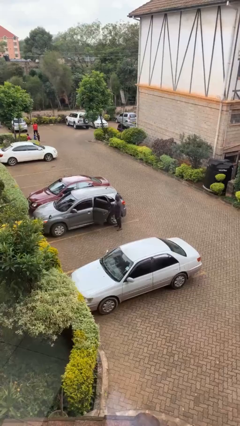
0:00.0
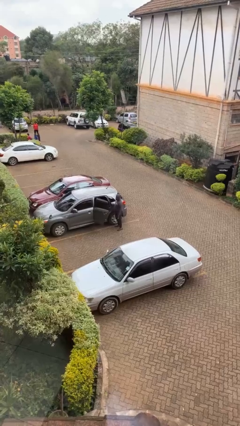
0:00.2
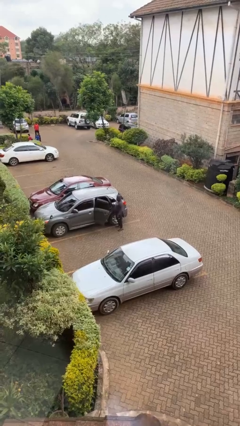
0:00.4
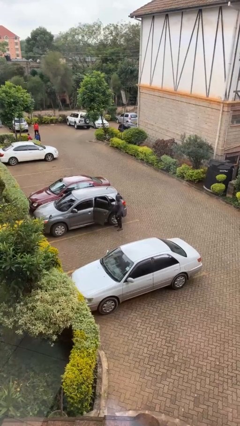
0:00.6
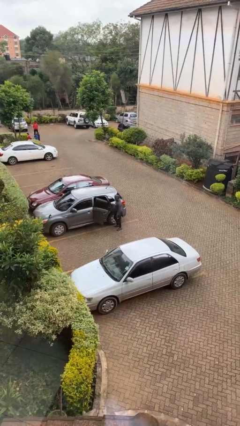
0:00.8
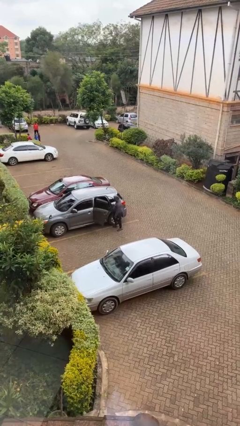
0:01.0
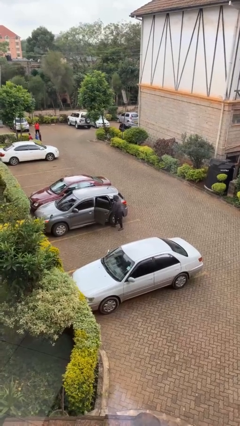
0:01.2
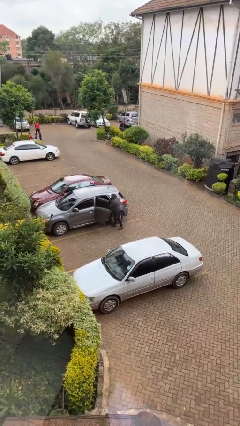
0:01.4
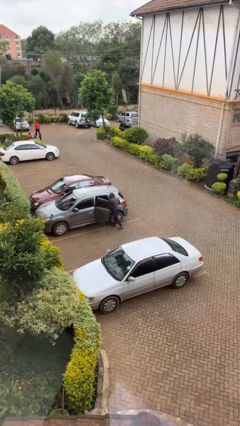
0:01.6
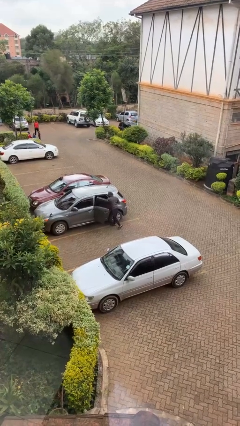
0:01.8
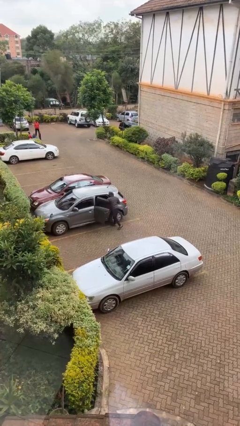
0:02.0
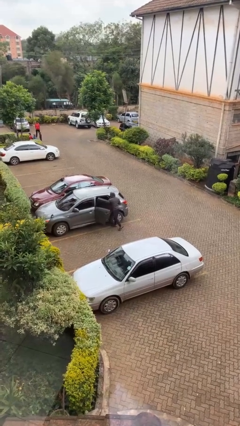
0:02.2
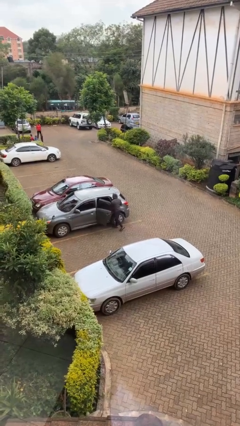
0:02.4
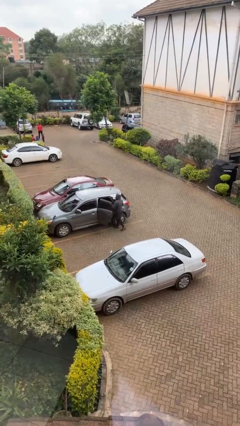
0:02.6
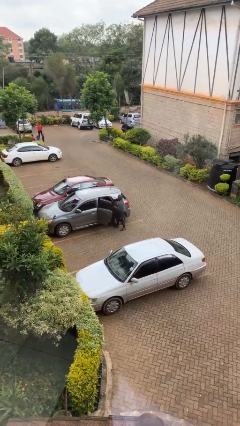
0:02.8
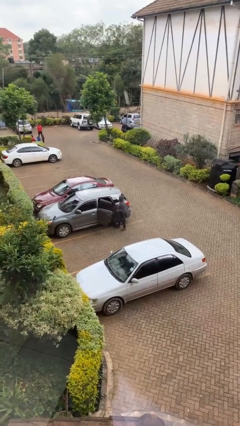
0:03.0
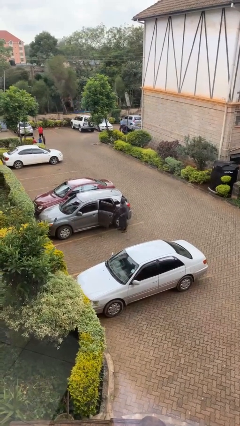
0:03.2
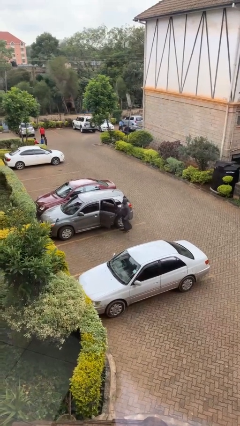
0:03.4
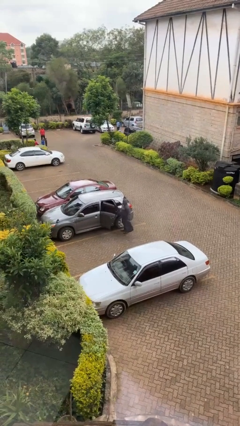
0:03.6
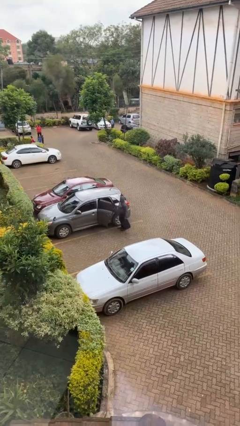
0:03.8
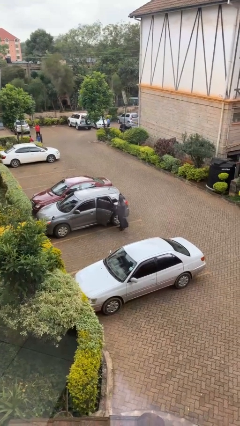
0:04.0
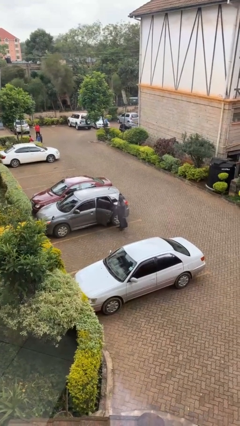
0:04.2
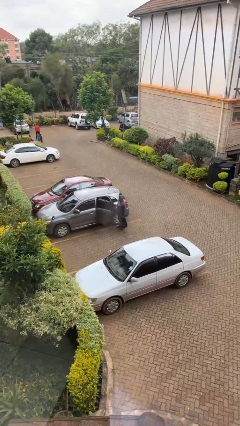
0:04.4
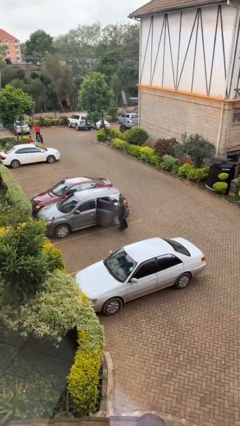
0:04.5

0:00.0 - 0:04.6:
person unloads car

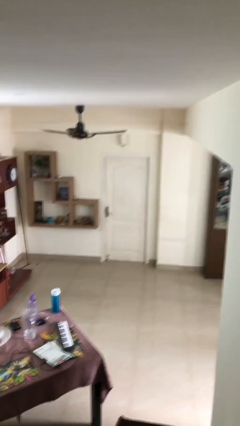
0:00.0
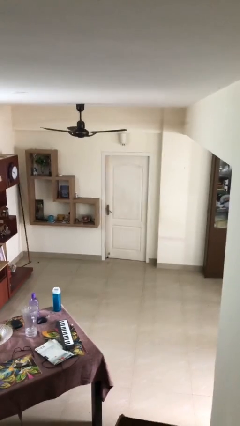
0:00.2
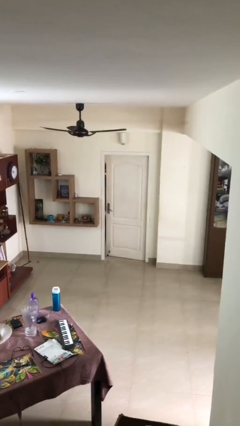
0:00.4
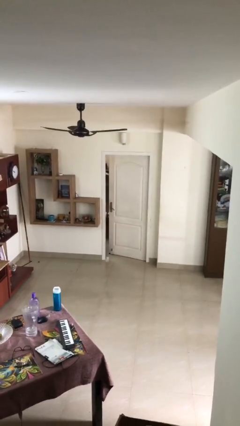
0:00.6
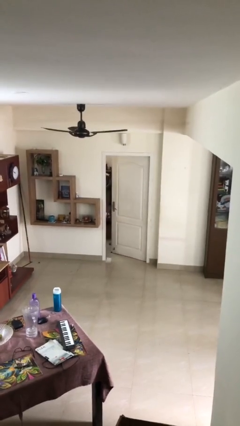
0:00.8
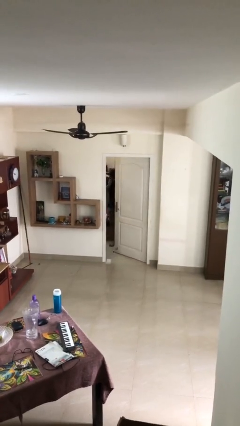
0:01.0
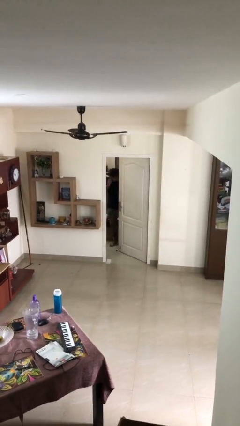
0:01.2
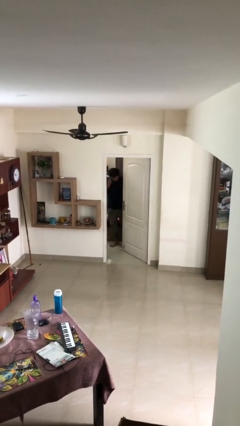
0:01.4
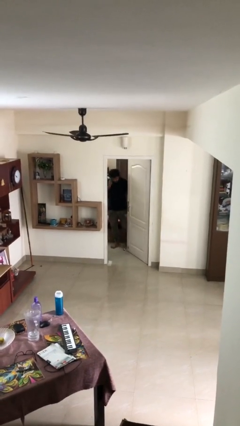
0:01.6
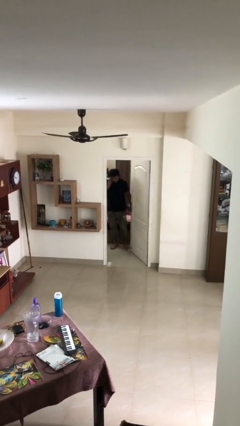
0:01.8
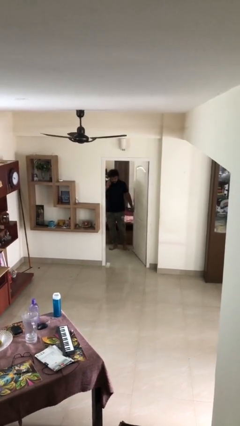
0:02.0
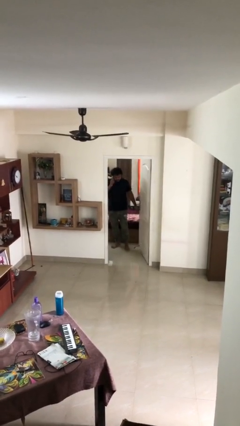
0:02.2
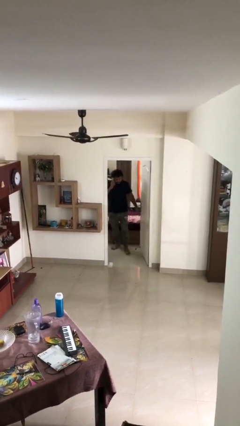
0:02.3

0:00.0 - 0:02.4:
person opens facility door

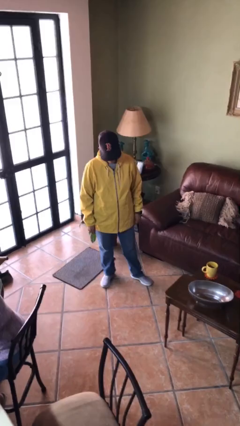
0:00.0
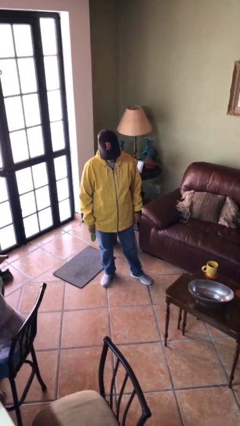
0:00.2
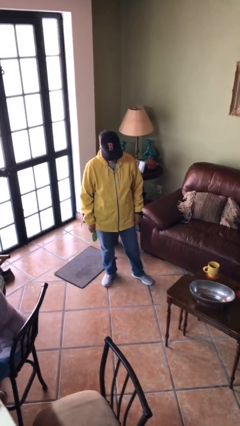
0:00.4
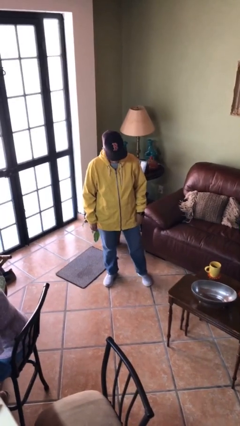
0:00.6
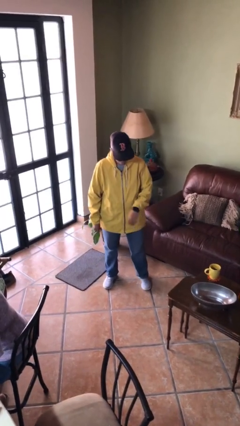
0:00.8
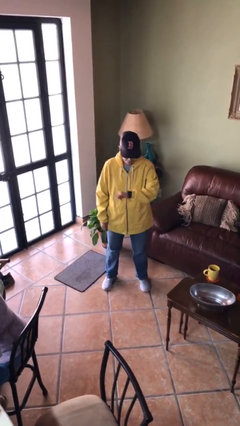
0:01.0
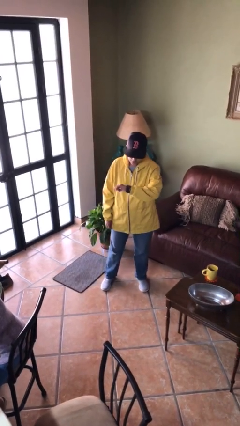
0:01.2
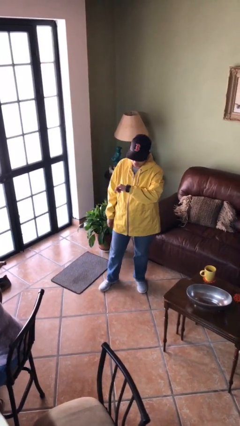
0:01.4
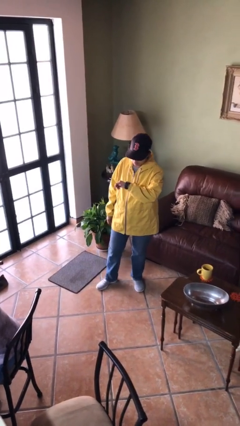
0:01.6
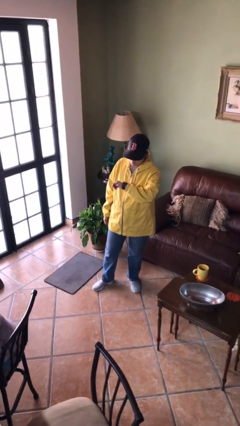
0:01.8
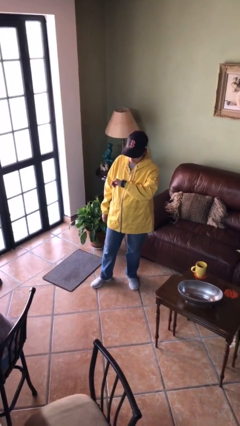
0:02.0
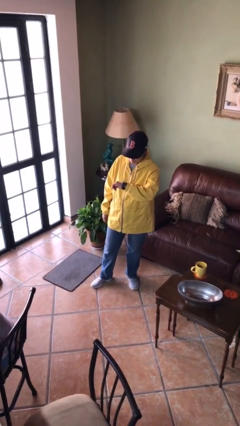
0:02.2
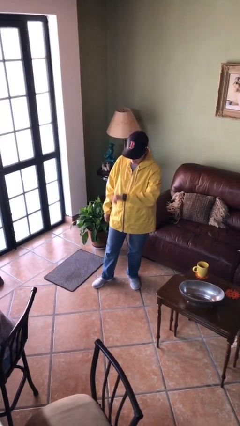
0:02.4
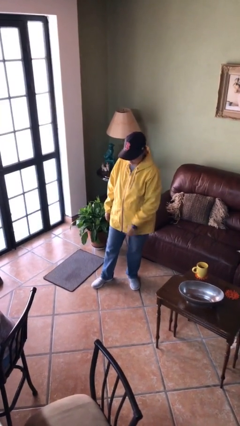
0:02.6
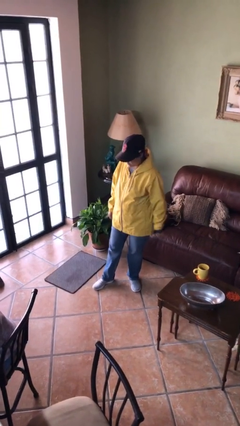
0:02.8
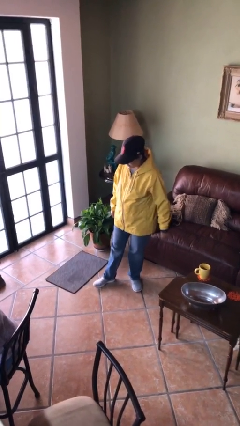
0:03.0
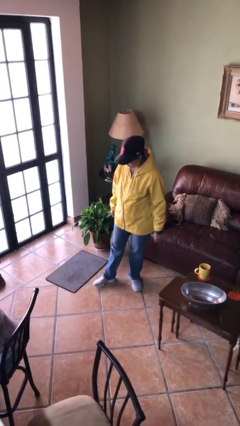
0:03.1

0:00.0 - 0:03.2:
person looks at wristwatch

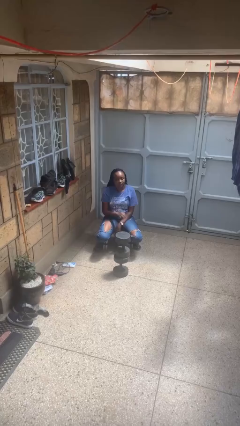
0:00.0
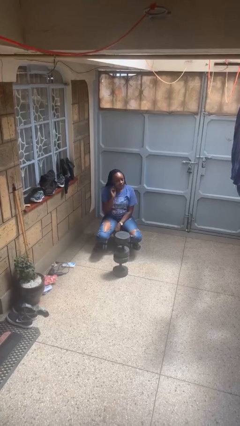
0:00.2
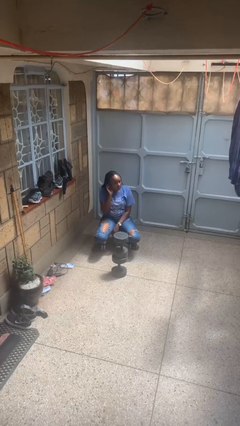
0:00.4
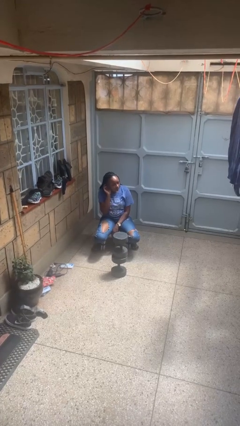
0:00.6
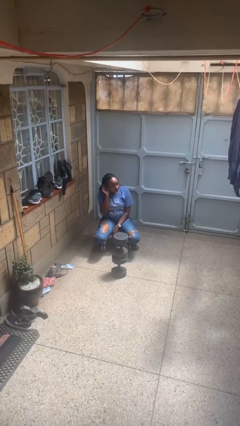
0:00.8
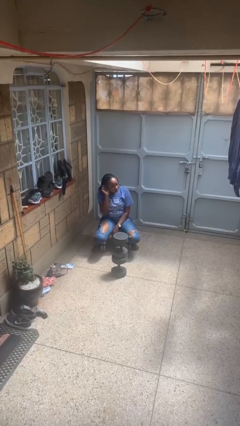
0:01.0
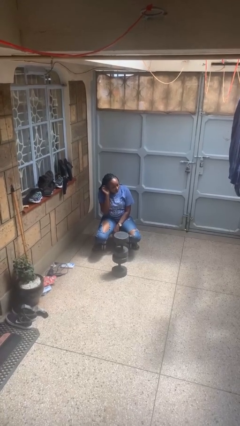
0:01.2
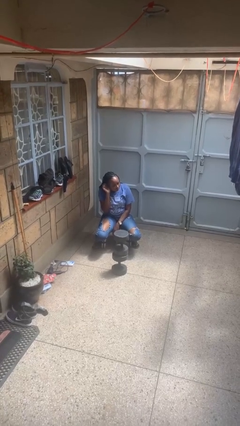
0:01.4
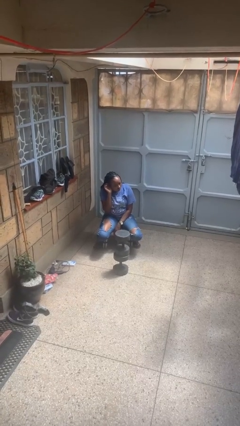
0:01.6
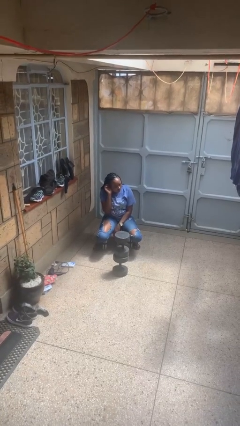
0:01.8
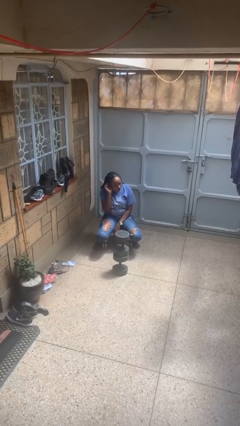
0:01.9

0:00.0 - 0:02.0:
person gestures listen closely

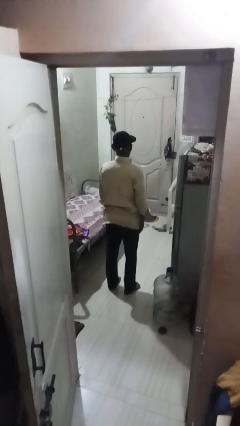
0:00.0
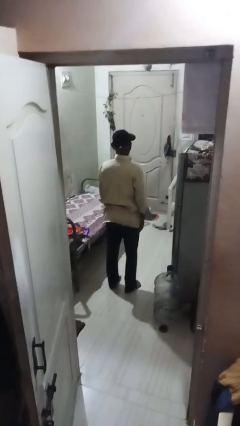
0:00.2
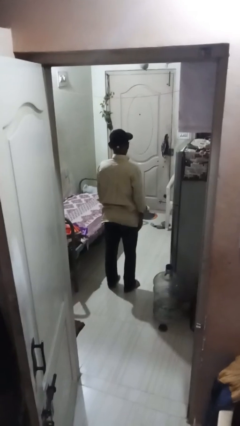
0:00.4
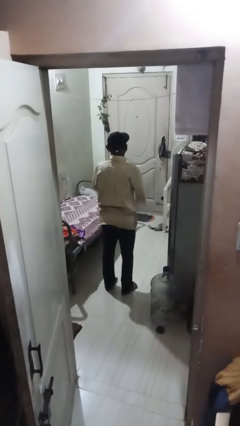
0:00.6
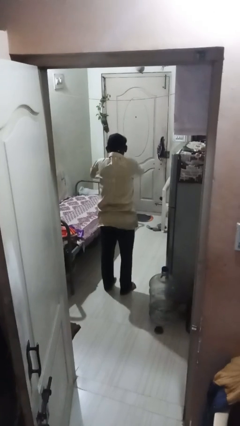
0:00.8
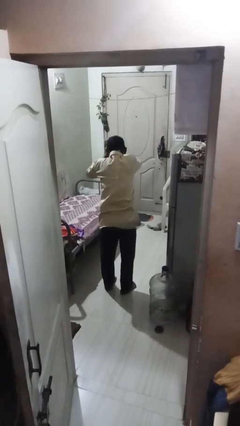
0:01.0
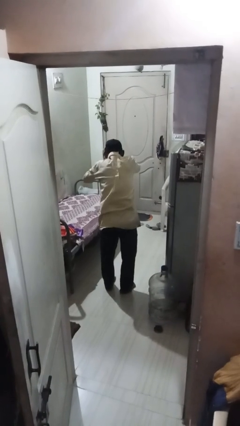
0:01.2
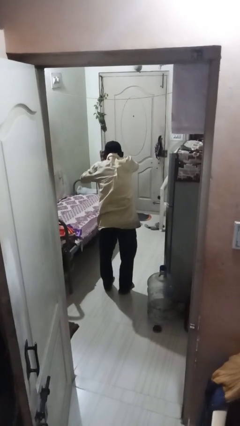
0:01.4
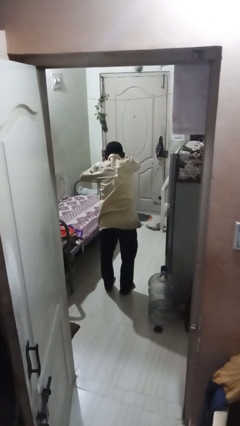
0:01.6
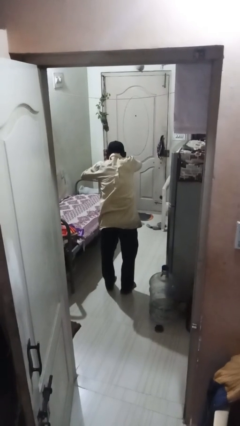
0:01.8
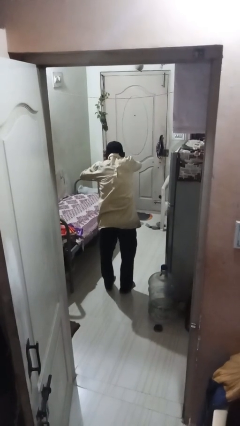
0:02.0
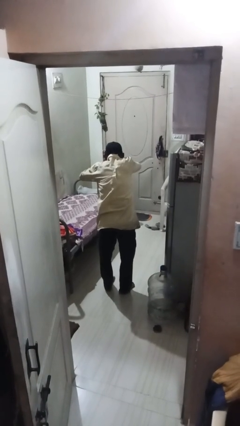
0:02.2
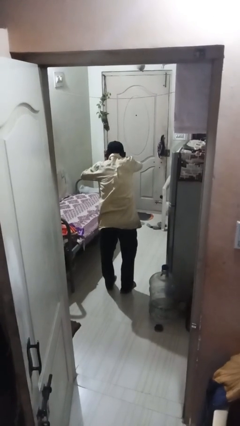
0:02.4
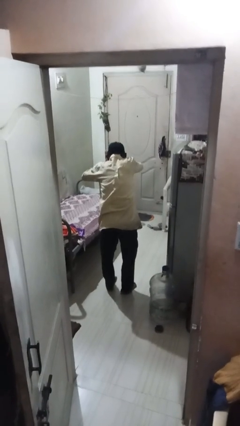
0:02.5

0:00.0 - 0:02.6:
person prays

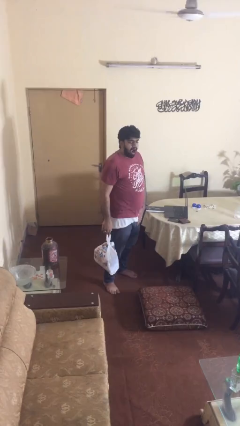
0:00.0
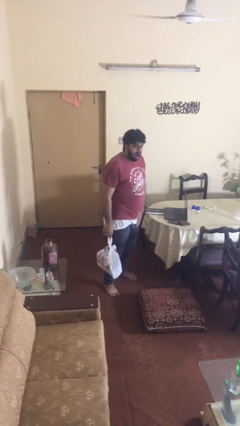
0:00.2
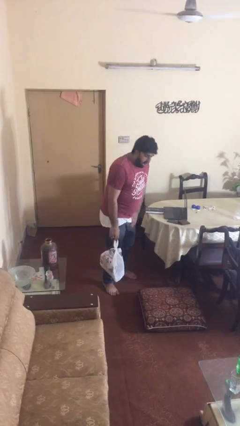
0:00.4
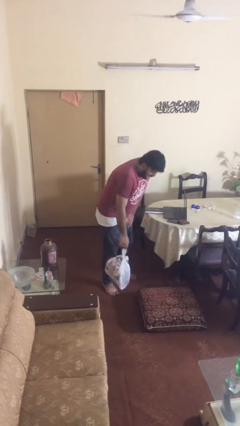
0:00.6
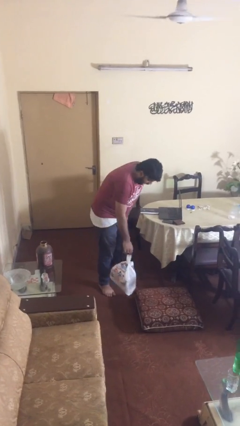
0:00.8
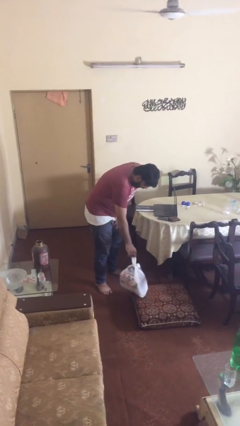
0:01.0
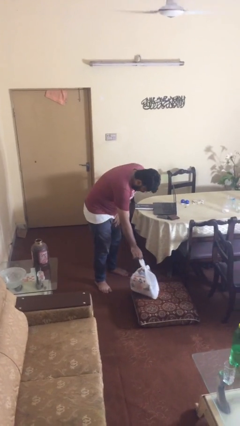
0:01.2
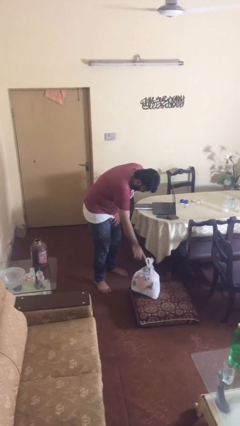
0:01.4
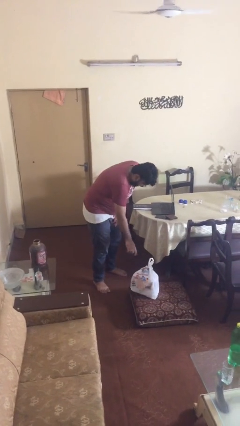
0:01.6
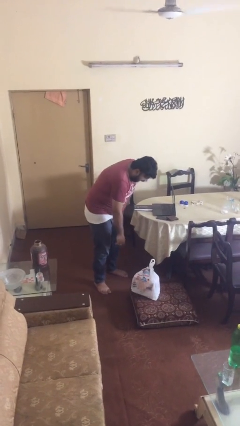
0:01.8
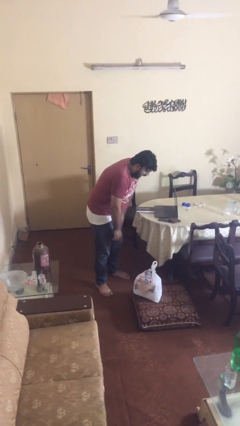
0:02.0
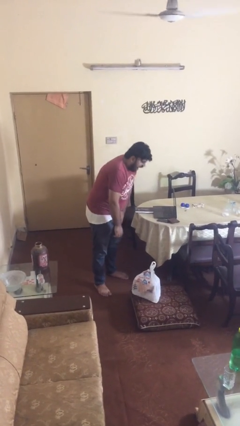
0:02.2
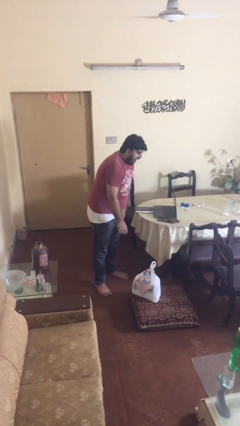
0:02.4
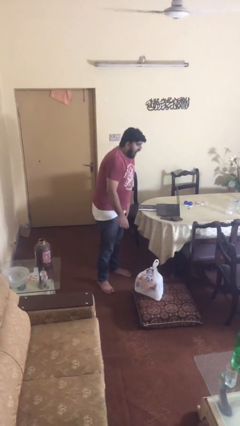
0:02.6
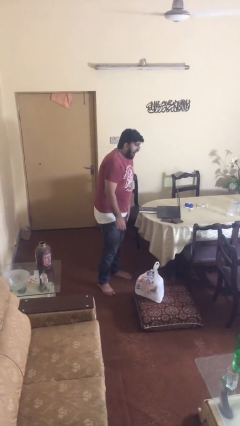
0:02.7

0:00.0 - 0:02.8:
person puts down object on floor
